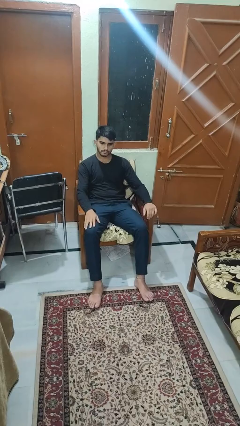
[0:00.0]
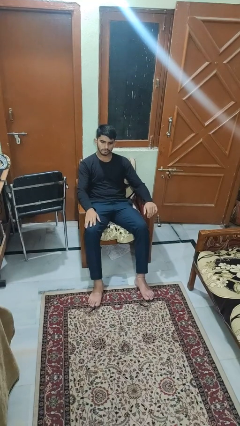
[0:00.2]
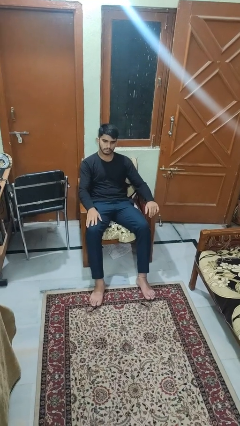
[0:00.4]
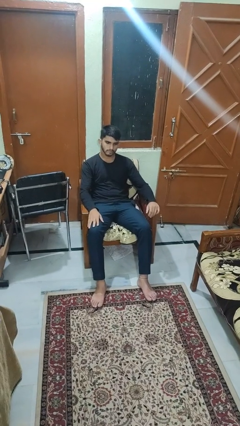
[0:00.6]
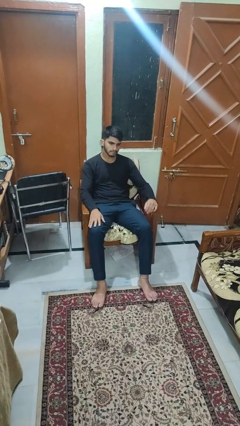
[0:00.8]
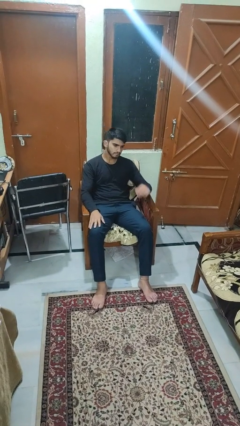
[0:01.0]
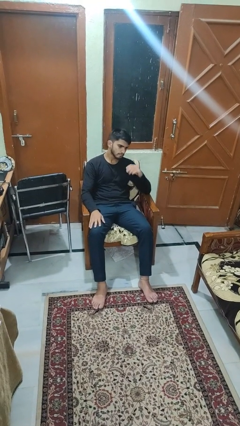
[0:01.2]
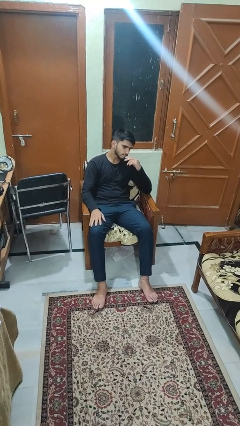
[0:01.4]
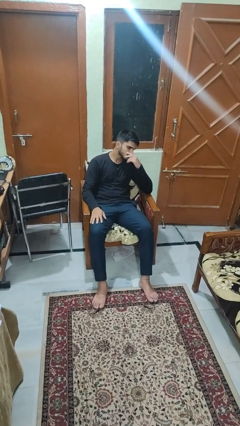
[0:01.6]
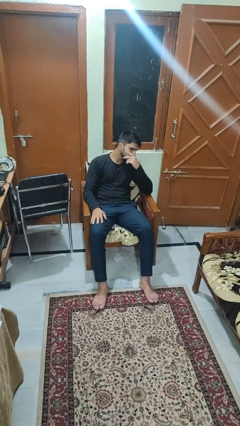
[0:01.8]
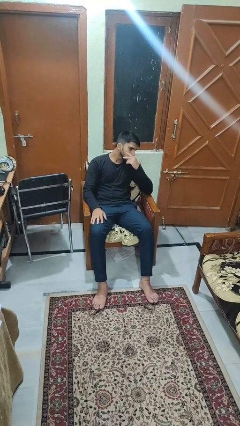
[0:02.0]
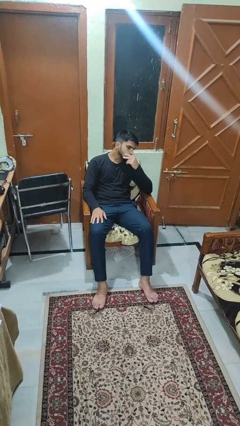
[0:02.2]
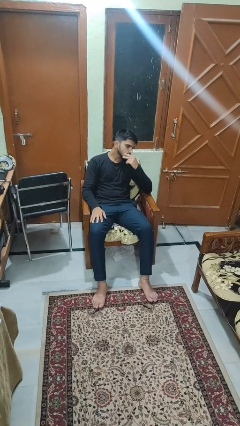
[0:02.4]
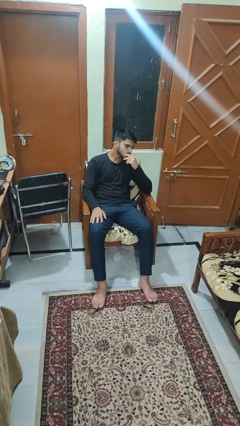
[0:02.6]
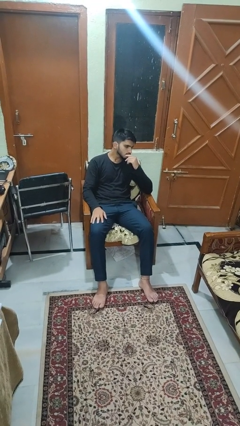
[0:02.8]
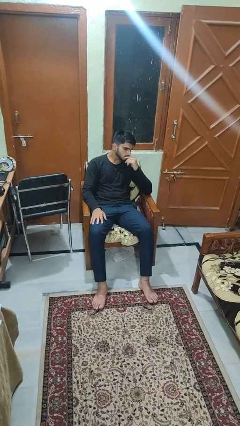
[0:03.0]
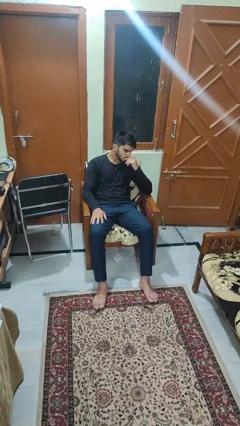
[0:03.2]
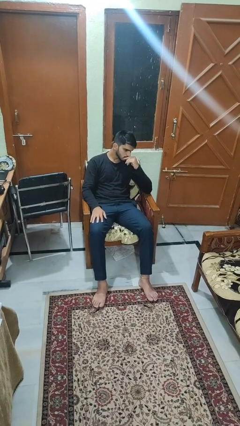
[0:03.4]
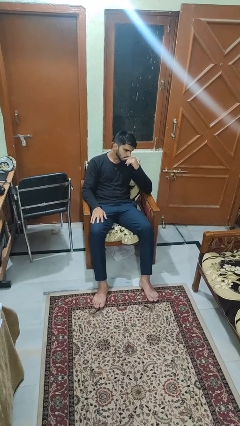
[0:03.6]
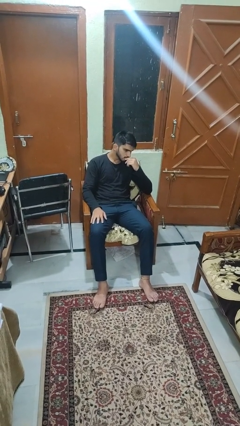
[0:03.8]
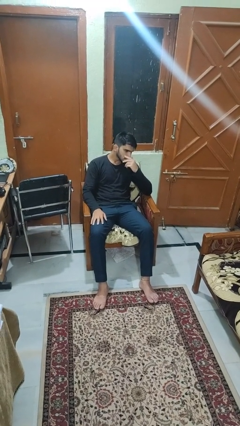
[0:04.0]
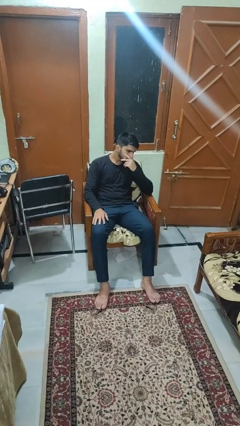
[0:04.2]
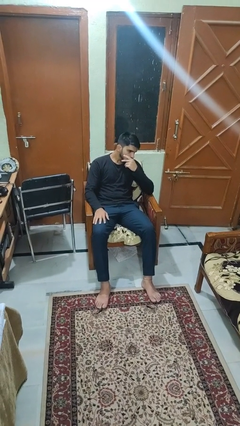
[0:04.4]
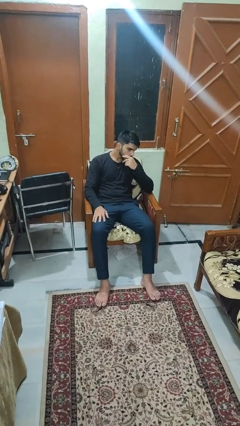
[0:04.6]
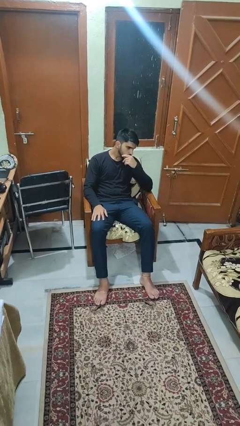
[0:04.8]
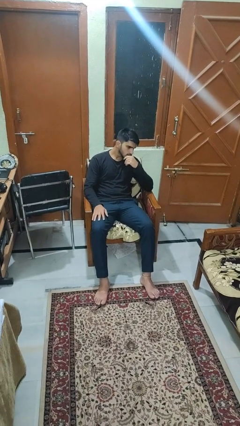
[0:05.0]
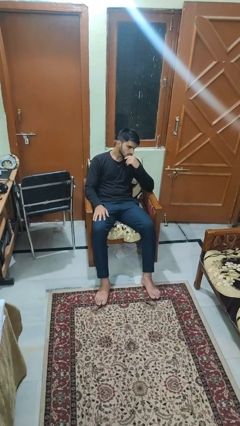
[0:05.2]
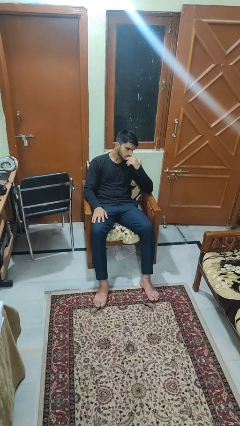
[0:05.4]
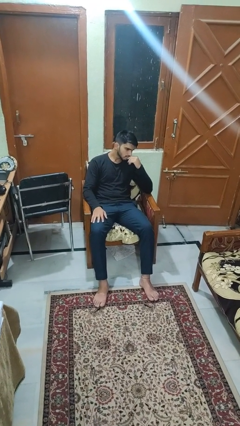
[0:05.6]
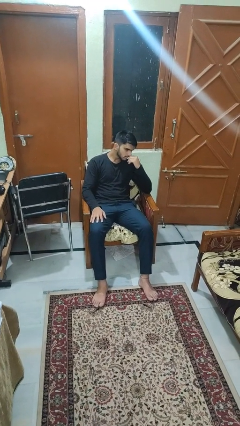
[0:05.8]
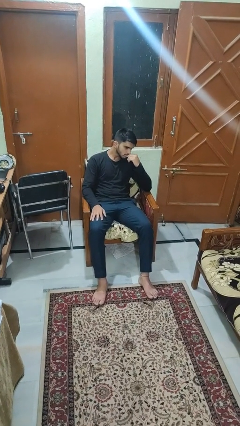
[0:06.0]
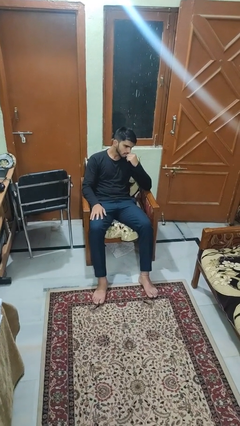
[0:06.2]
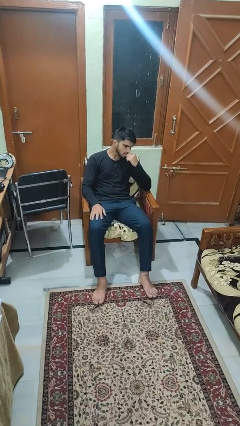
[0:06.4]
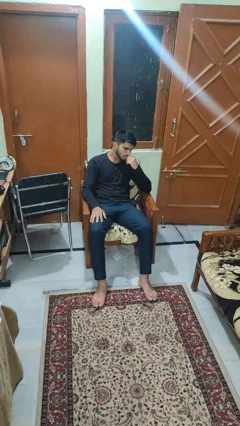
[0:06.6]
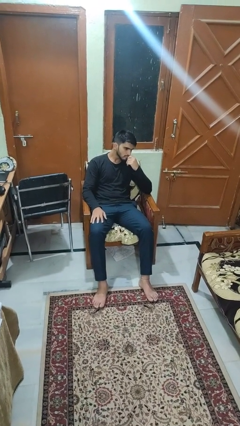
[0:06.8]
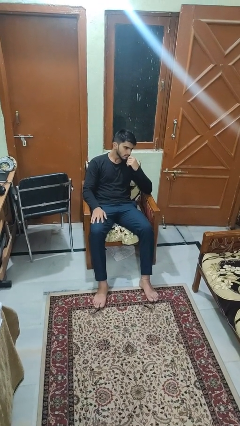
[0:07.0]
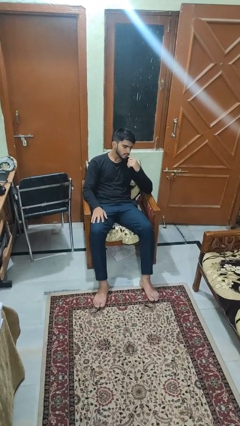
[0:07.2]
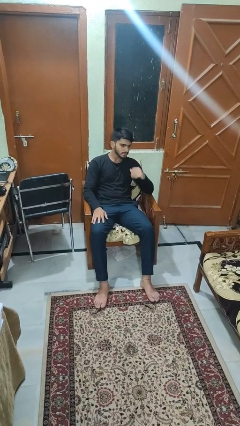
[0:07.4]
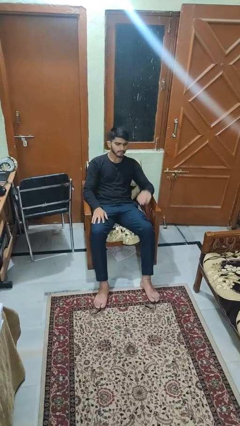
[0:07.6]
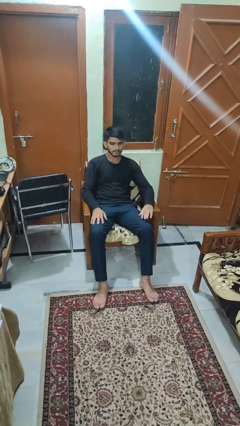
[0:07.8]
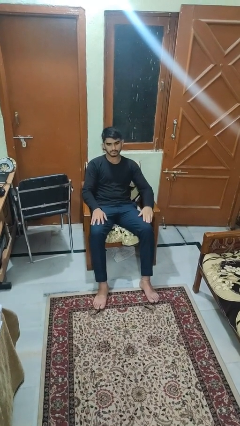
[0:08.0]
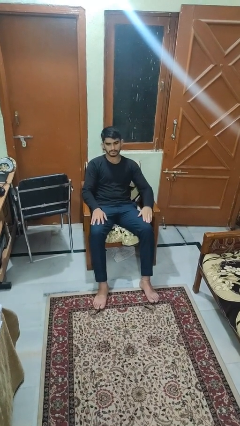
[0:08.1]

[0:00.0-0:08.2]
person strokes chin

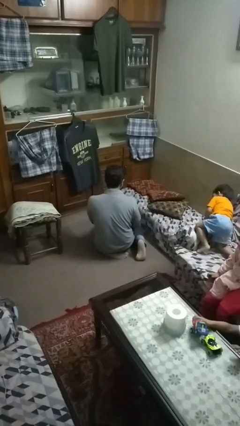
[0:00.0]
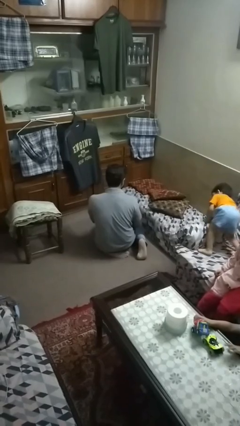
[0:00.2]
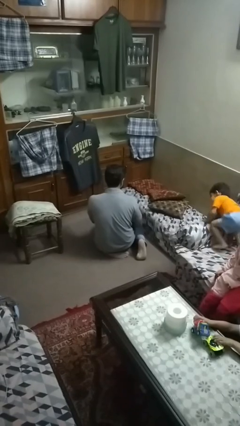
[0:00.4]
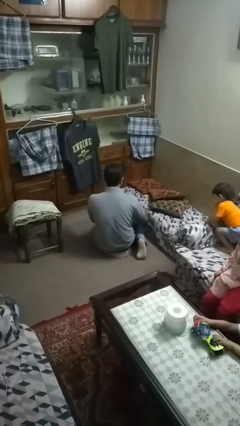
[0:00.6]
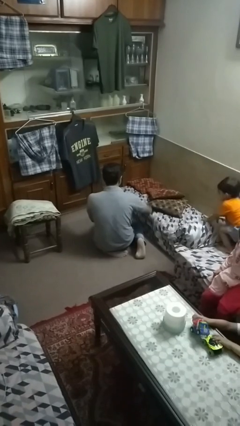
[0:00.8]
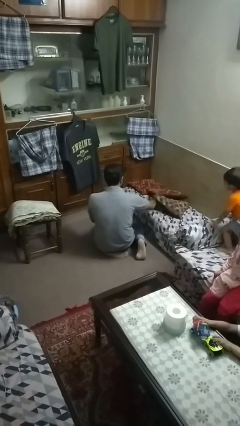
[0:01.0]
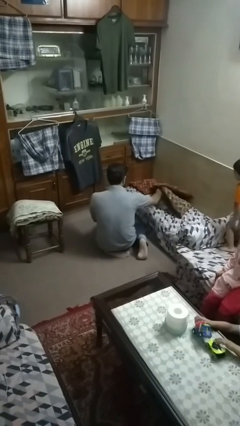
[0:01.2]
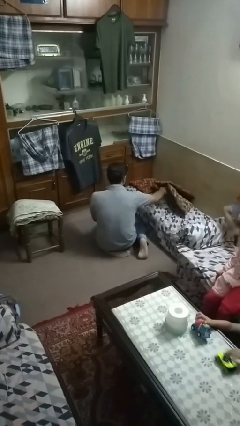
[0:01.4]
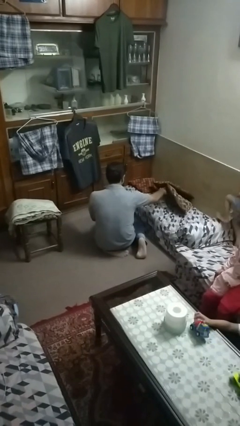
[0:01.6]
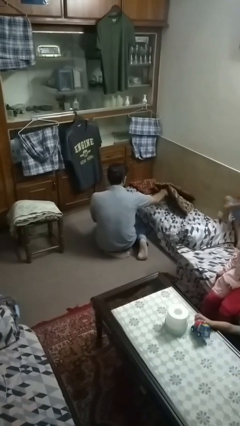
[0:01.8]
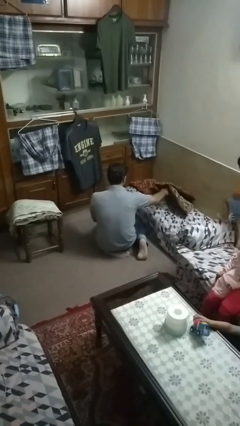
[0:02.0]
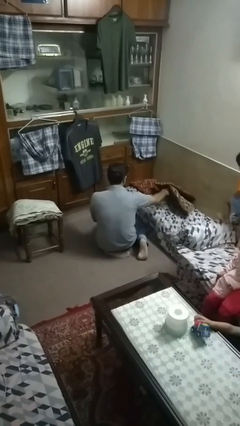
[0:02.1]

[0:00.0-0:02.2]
person searches in couch

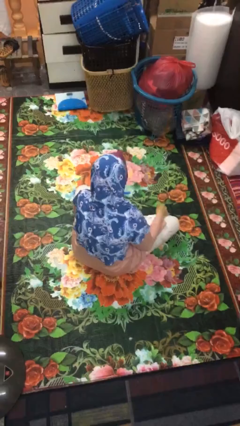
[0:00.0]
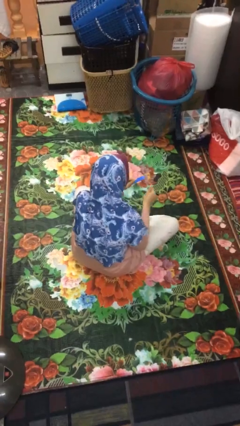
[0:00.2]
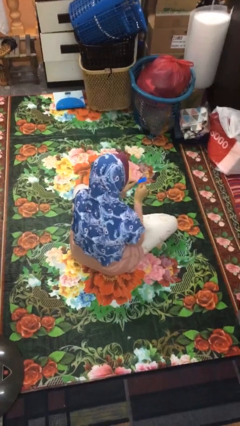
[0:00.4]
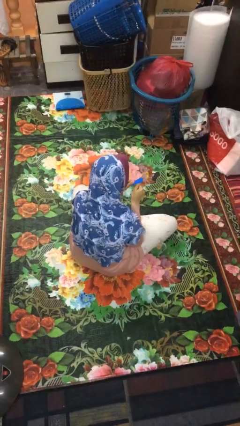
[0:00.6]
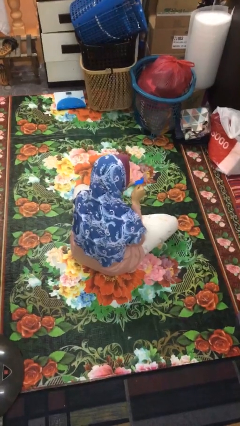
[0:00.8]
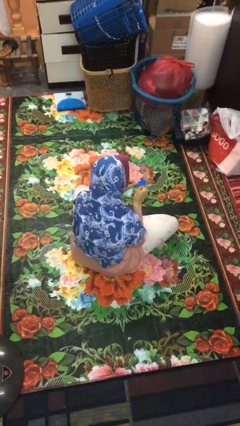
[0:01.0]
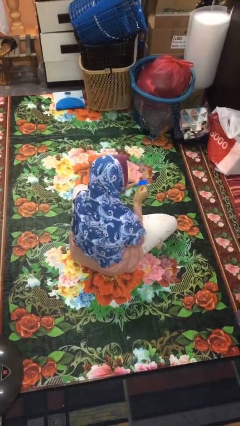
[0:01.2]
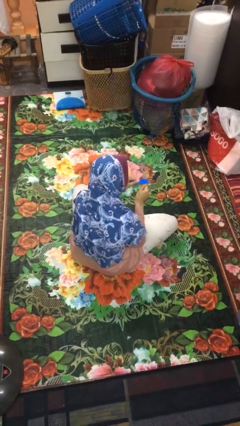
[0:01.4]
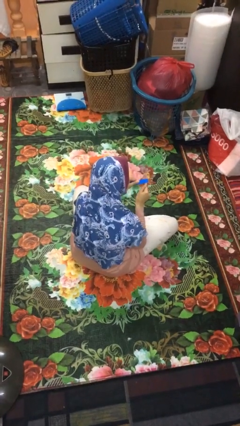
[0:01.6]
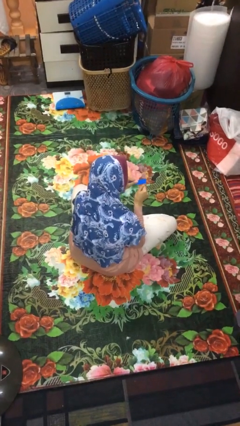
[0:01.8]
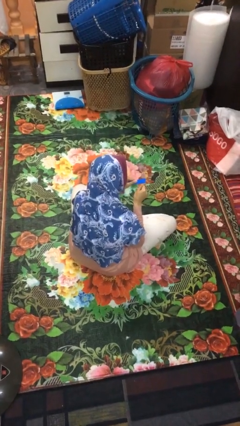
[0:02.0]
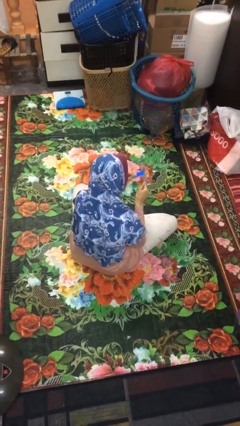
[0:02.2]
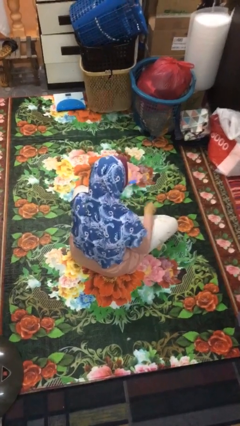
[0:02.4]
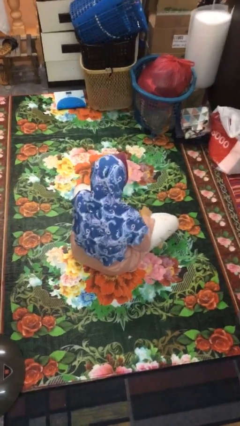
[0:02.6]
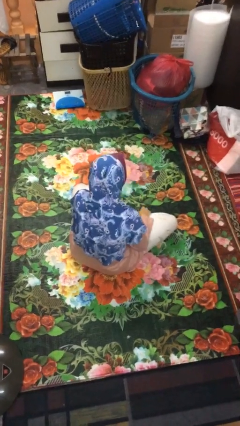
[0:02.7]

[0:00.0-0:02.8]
person files fingernails

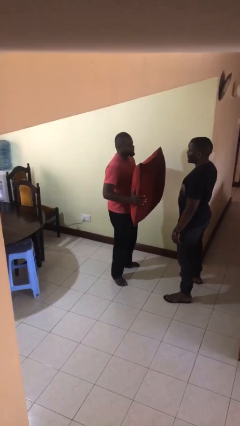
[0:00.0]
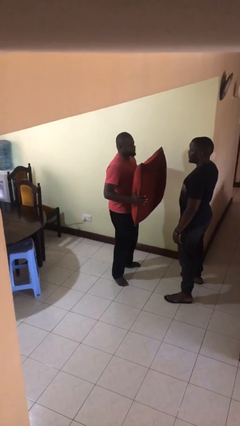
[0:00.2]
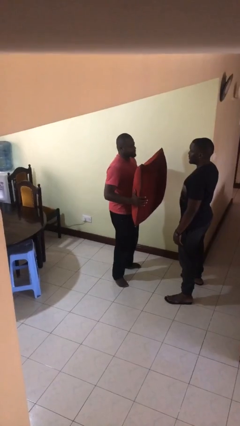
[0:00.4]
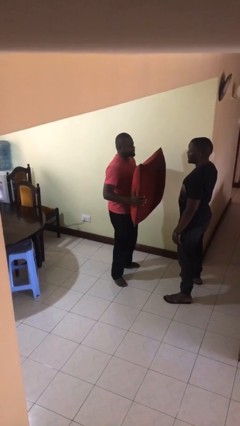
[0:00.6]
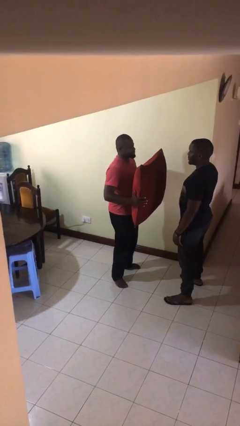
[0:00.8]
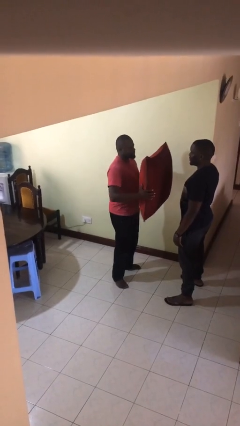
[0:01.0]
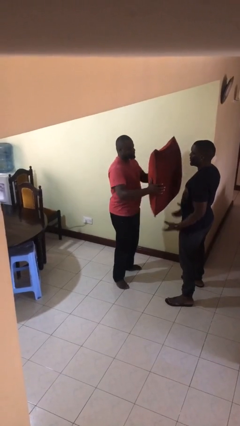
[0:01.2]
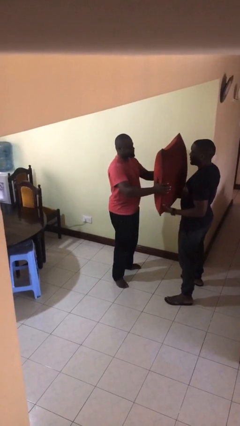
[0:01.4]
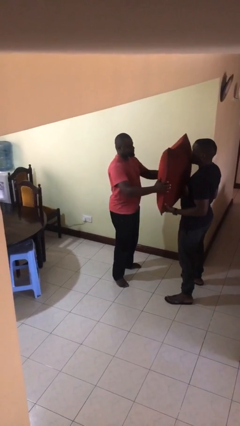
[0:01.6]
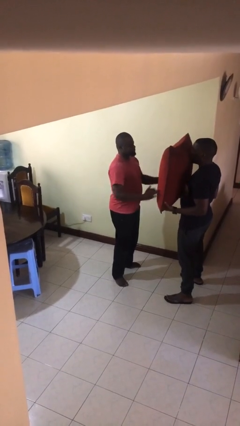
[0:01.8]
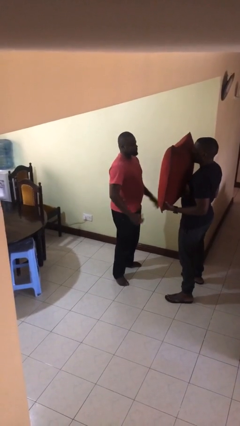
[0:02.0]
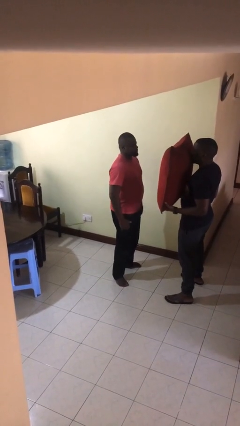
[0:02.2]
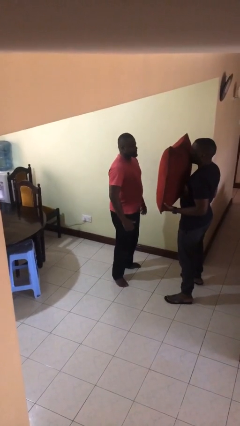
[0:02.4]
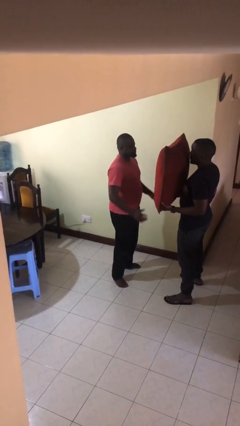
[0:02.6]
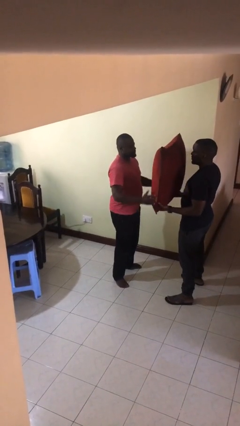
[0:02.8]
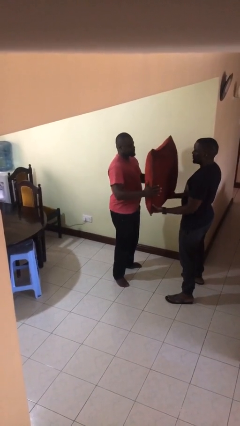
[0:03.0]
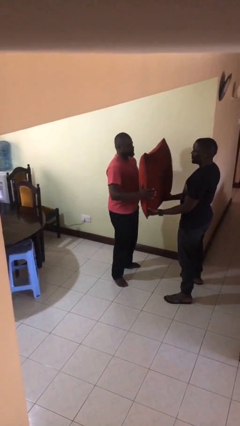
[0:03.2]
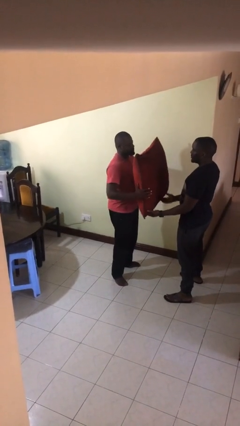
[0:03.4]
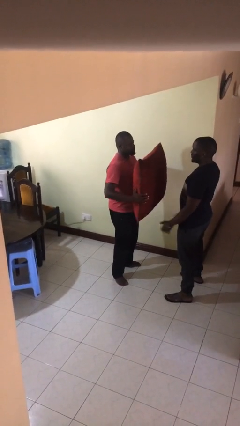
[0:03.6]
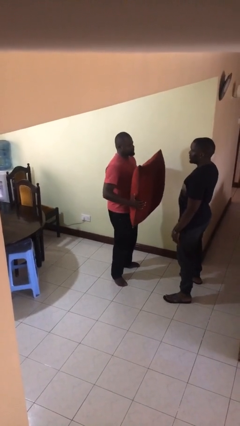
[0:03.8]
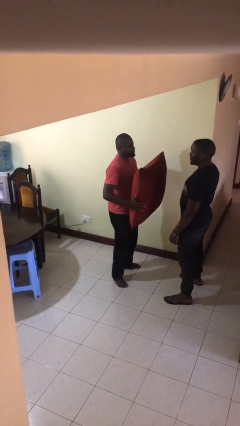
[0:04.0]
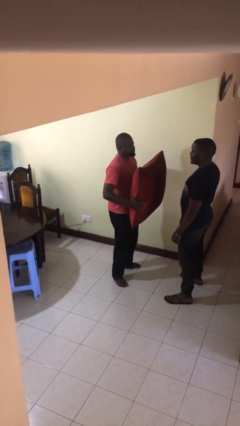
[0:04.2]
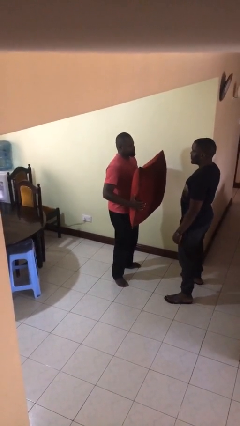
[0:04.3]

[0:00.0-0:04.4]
person transfers object to person

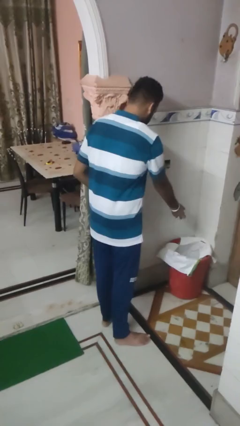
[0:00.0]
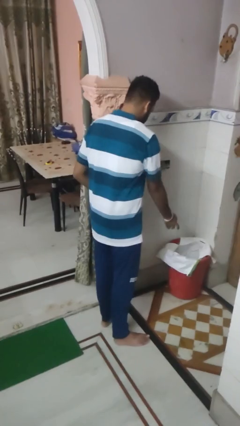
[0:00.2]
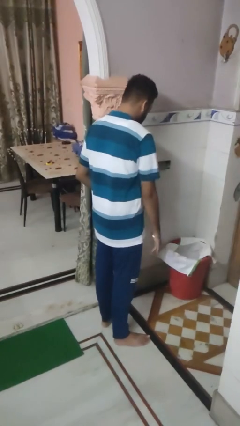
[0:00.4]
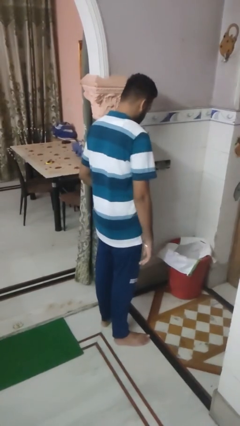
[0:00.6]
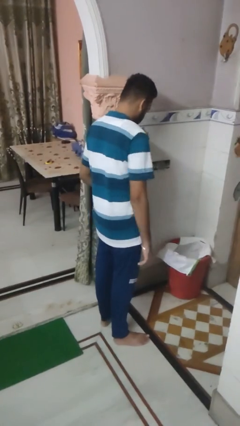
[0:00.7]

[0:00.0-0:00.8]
person discards trash
